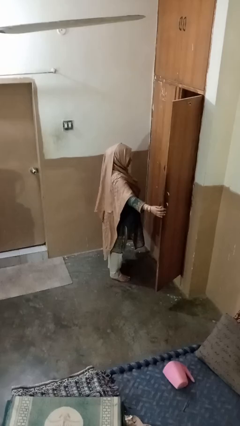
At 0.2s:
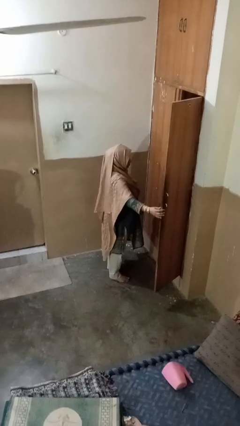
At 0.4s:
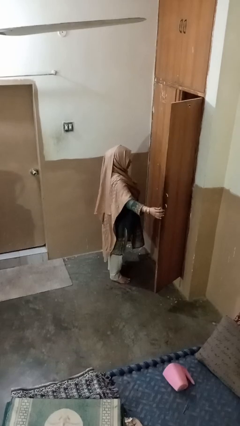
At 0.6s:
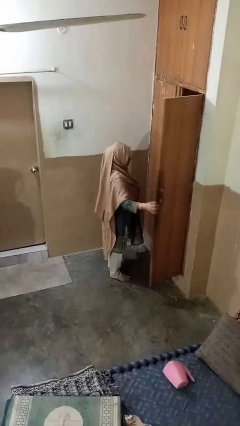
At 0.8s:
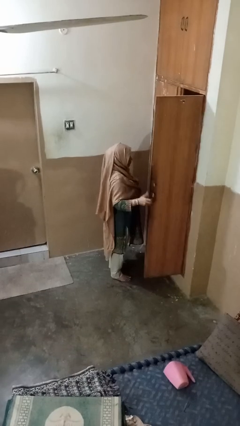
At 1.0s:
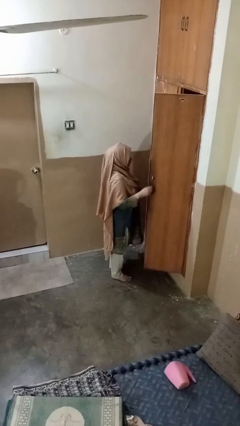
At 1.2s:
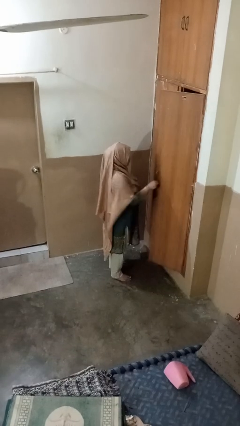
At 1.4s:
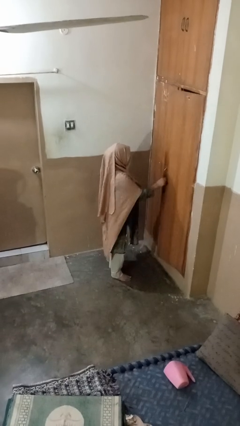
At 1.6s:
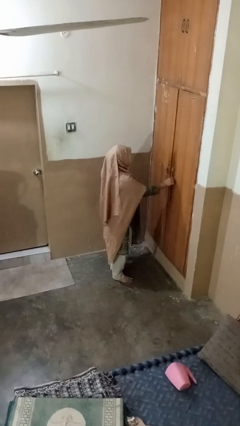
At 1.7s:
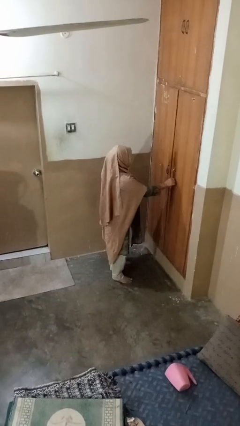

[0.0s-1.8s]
person closes closet door

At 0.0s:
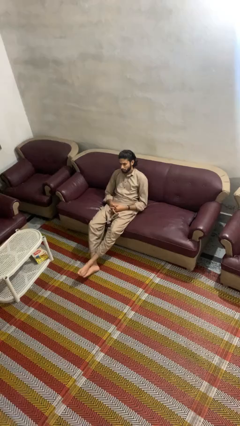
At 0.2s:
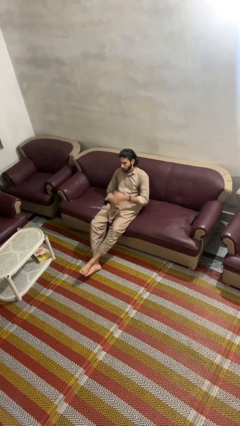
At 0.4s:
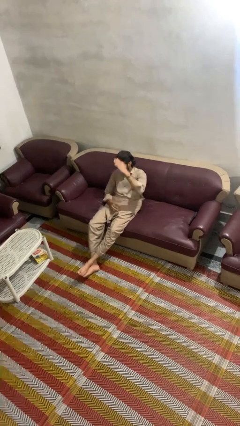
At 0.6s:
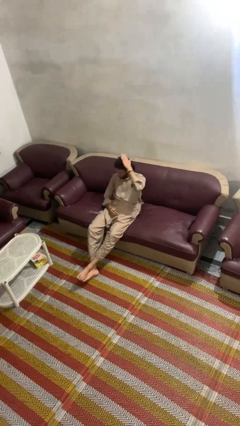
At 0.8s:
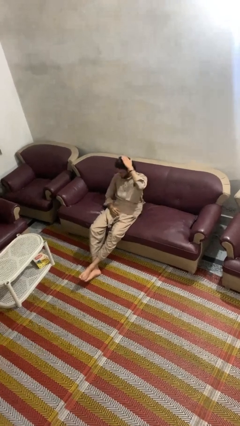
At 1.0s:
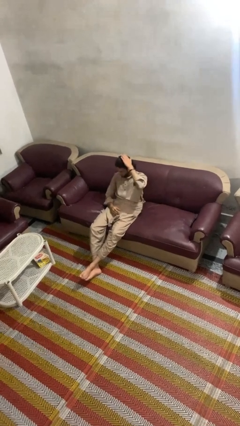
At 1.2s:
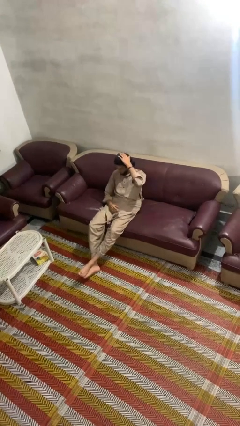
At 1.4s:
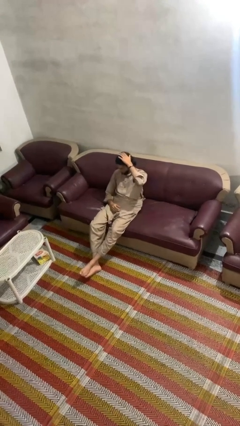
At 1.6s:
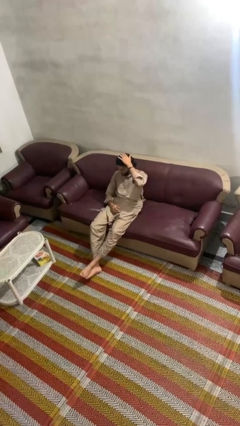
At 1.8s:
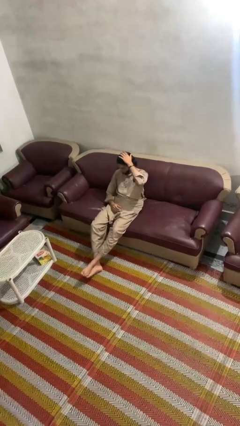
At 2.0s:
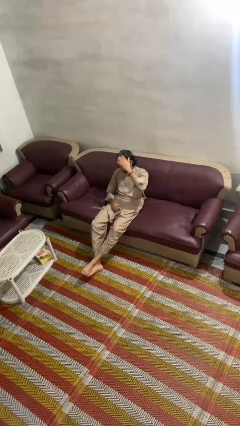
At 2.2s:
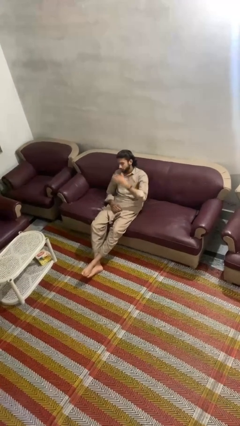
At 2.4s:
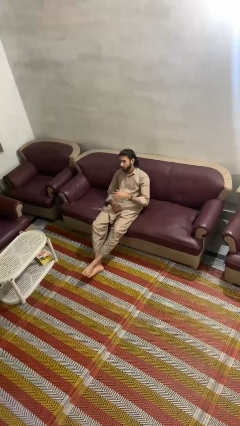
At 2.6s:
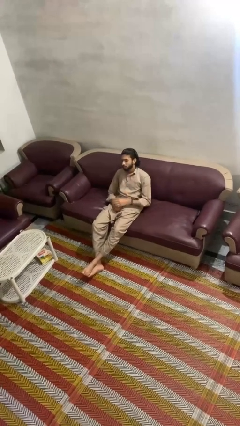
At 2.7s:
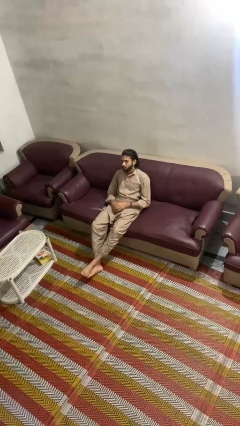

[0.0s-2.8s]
person pats head

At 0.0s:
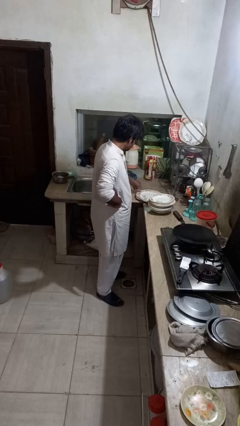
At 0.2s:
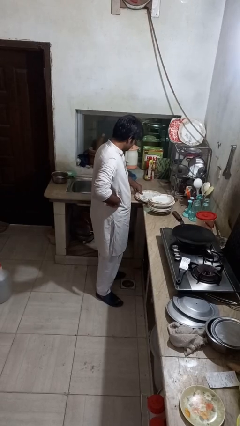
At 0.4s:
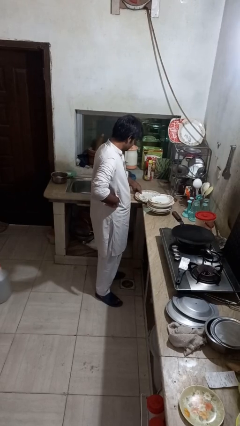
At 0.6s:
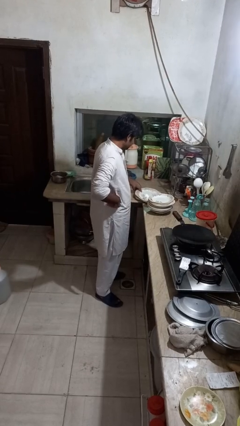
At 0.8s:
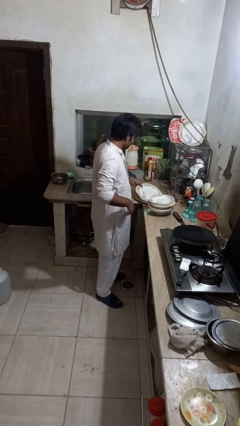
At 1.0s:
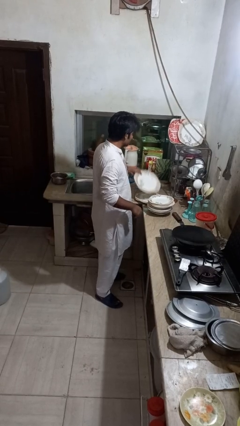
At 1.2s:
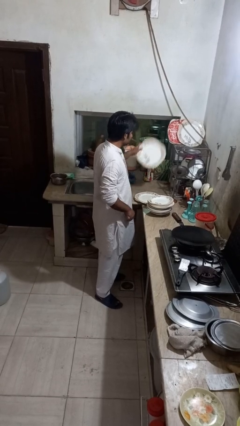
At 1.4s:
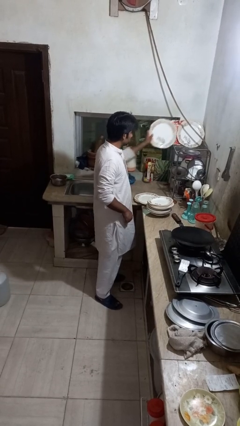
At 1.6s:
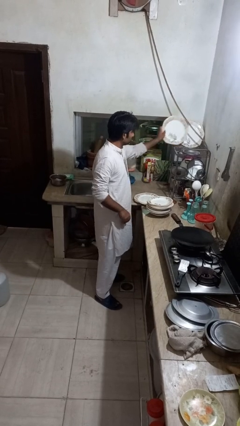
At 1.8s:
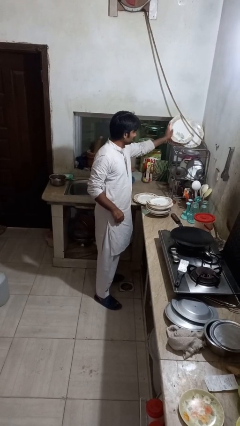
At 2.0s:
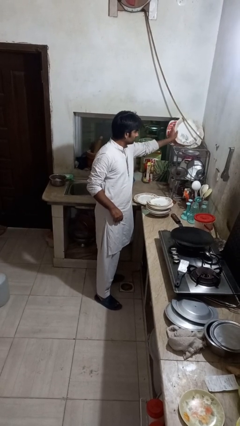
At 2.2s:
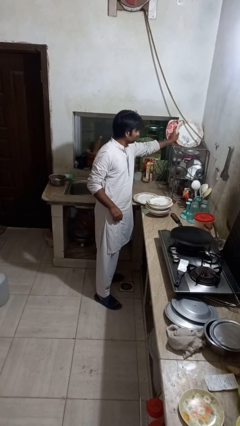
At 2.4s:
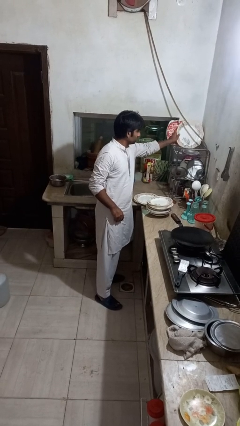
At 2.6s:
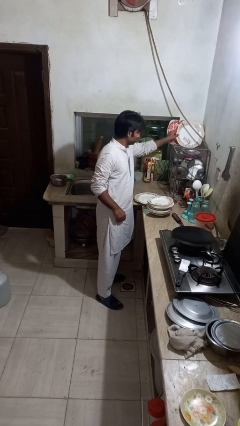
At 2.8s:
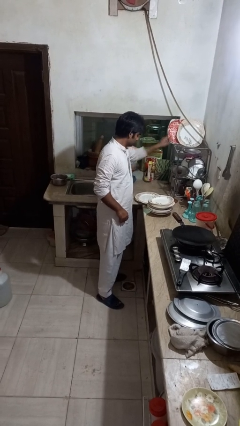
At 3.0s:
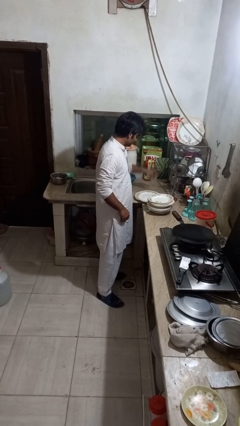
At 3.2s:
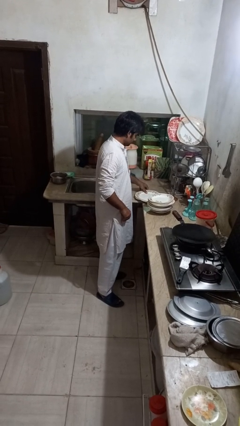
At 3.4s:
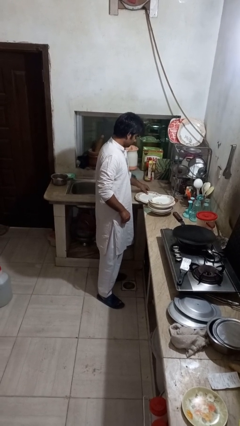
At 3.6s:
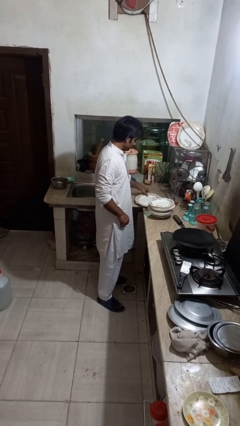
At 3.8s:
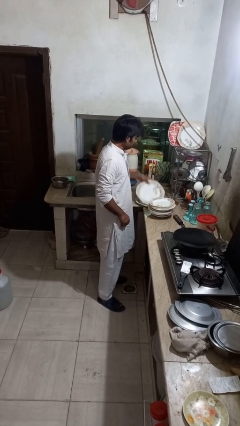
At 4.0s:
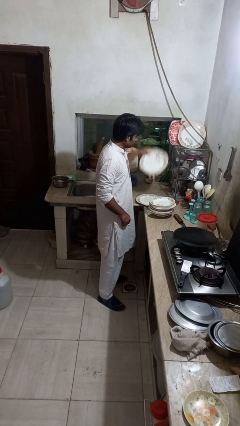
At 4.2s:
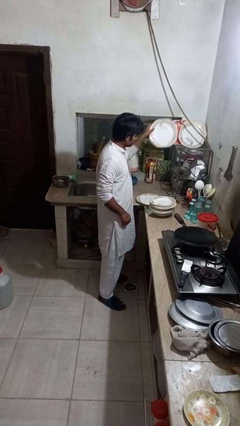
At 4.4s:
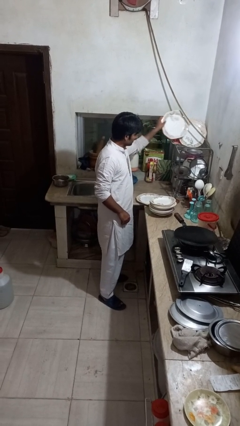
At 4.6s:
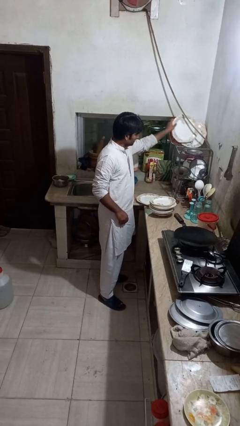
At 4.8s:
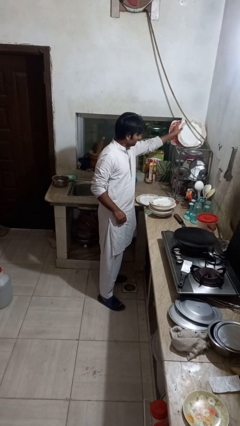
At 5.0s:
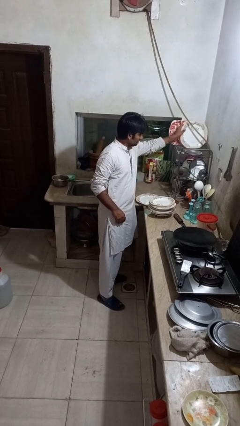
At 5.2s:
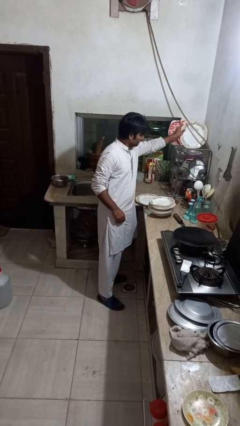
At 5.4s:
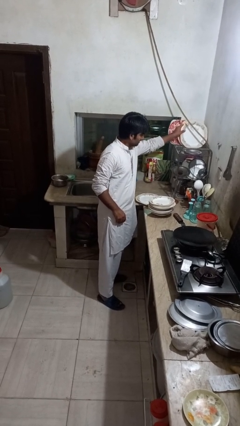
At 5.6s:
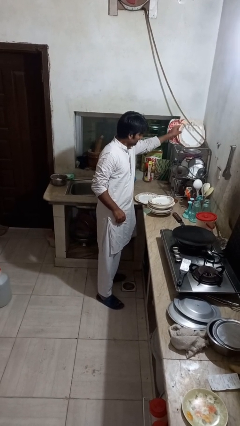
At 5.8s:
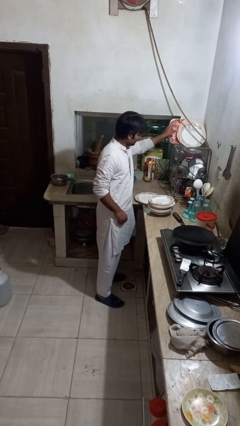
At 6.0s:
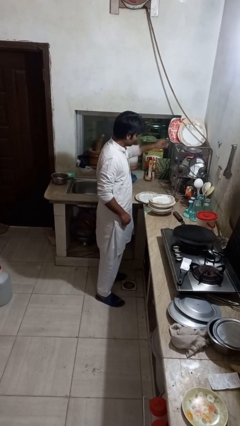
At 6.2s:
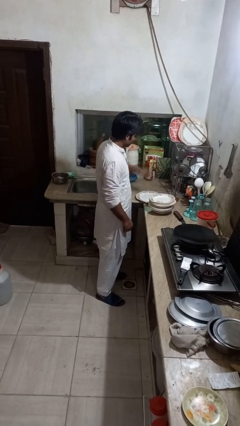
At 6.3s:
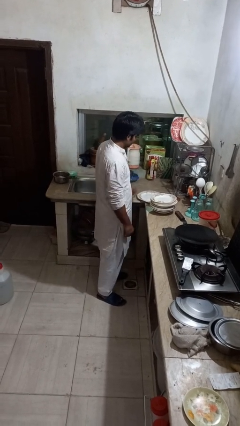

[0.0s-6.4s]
person loads dishwasher

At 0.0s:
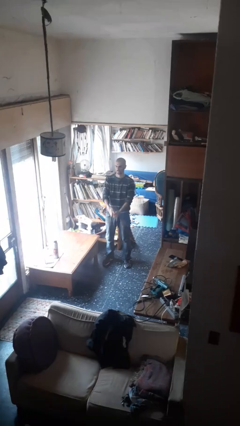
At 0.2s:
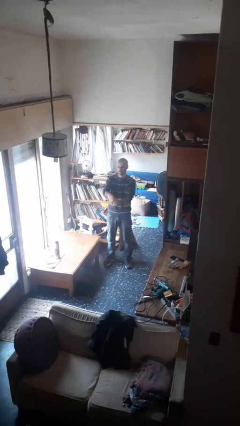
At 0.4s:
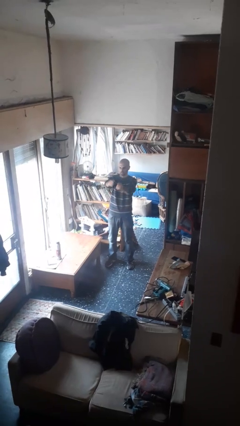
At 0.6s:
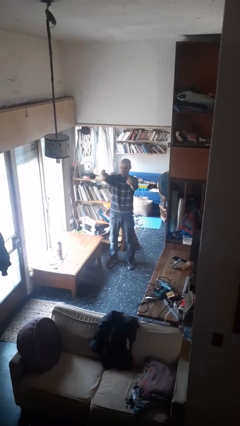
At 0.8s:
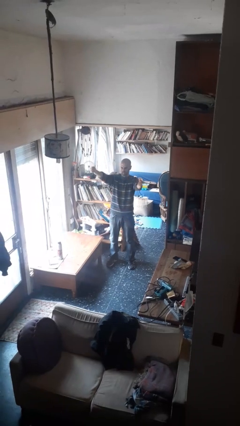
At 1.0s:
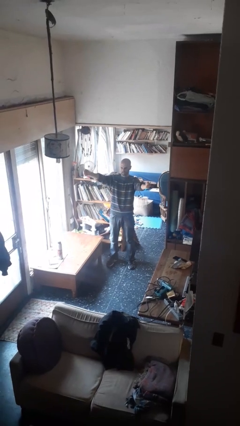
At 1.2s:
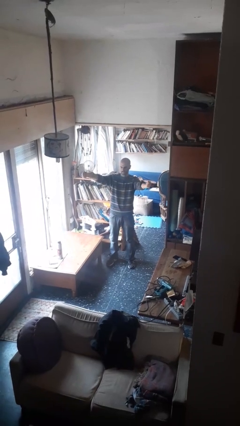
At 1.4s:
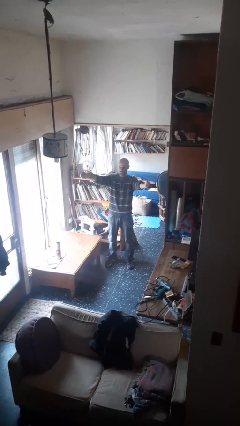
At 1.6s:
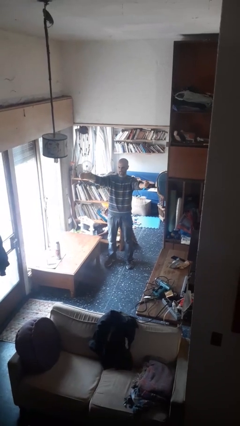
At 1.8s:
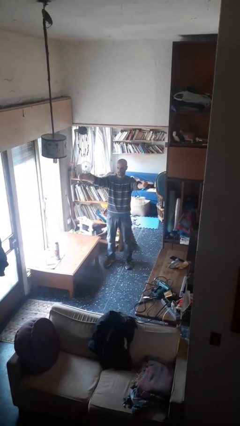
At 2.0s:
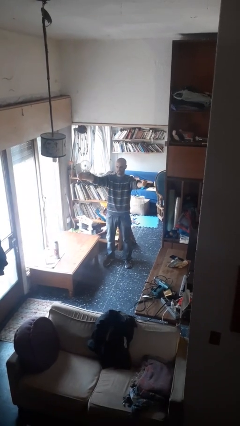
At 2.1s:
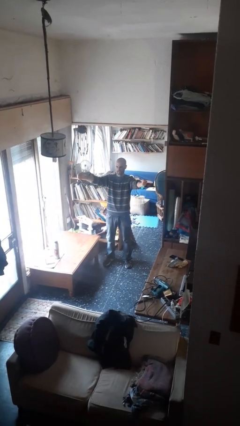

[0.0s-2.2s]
person gestures zoom in

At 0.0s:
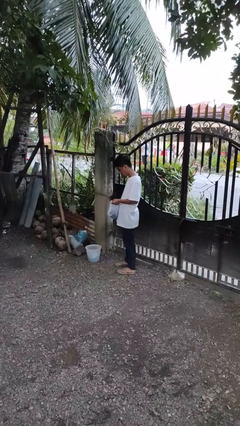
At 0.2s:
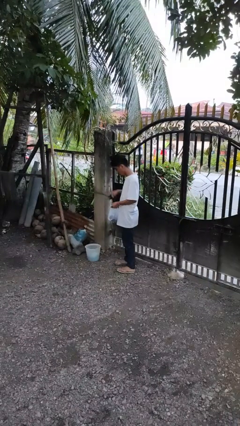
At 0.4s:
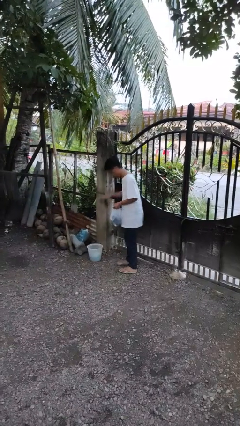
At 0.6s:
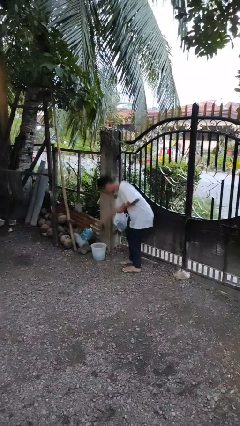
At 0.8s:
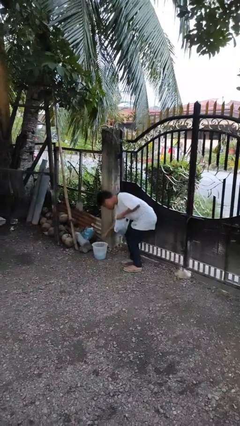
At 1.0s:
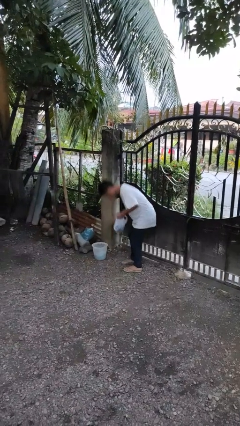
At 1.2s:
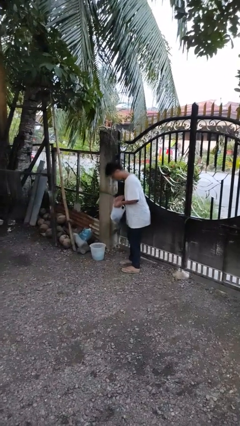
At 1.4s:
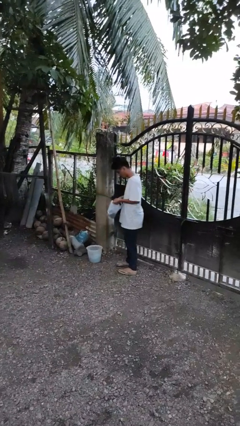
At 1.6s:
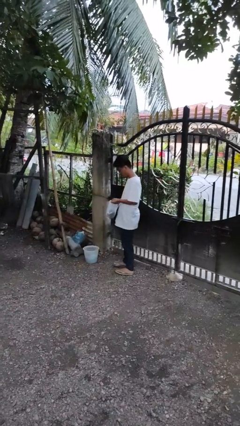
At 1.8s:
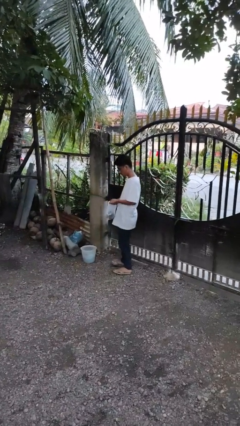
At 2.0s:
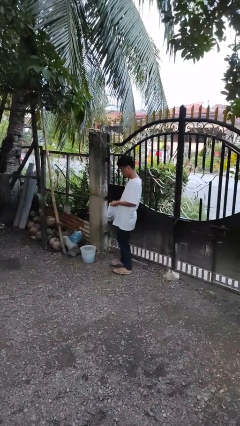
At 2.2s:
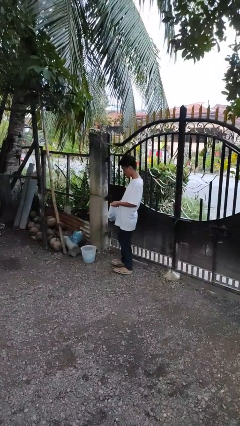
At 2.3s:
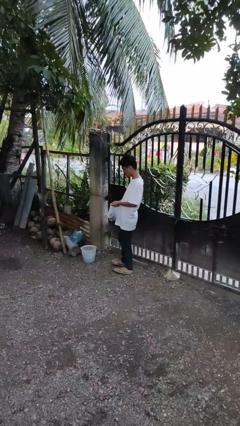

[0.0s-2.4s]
person discards trash

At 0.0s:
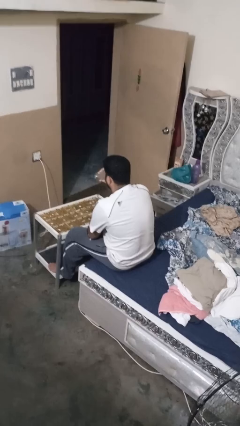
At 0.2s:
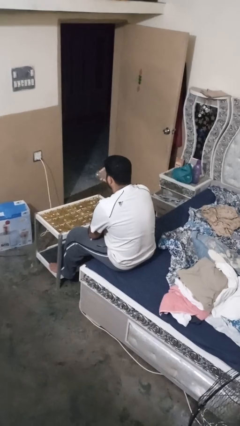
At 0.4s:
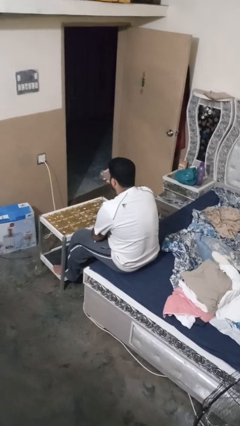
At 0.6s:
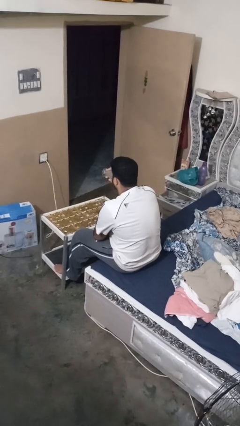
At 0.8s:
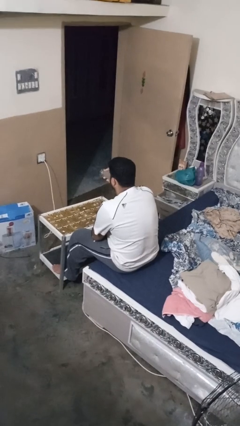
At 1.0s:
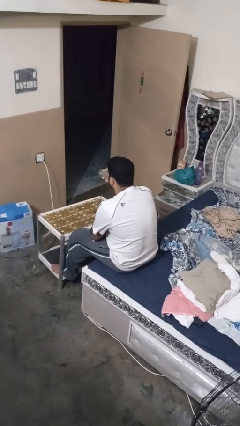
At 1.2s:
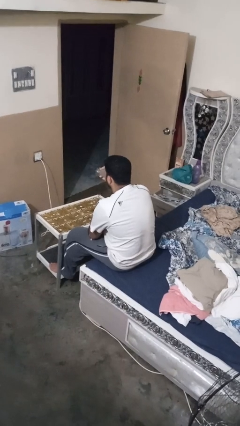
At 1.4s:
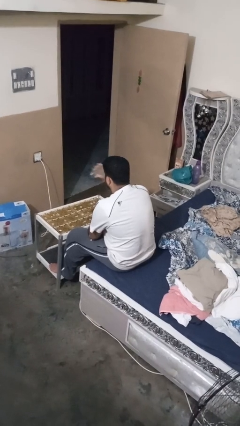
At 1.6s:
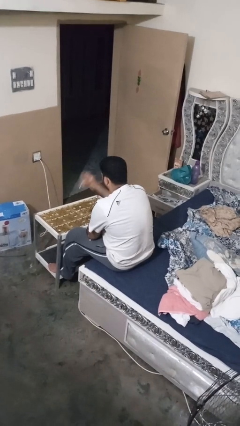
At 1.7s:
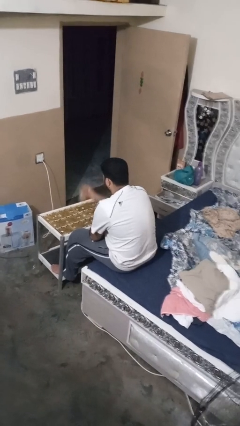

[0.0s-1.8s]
person drinks from shotglass

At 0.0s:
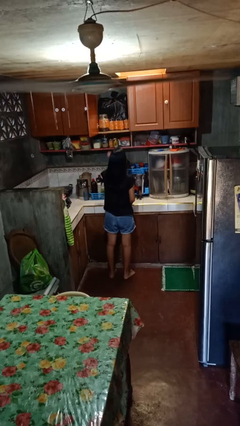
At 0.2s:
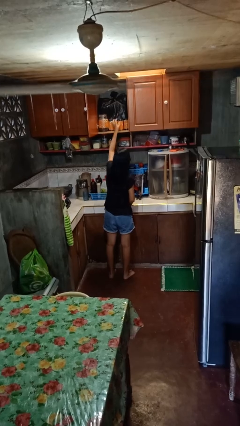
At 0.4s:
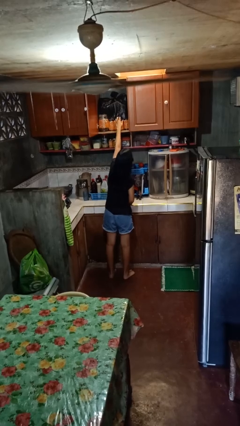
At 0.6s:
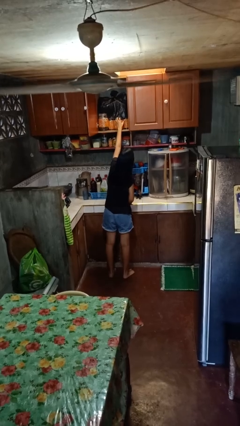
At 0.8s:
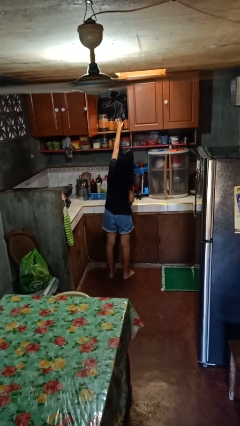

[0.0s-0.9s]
person picks up object from cabinet
